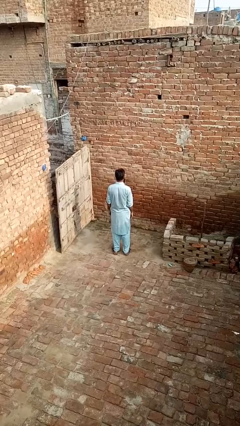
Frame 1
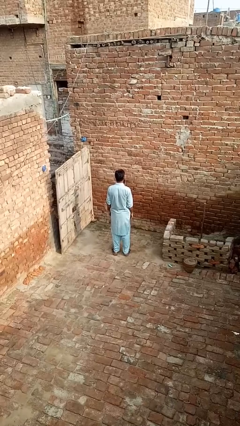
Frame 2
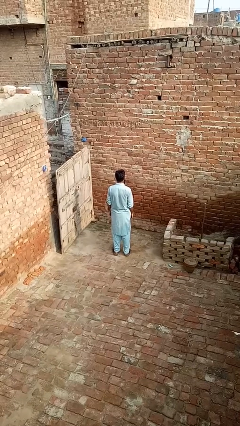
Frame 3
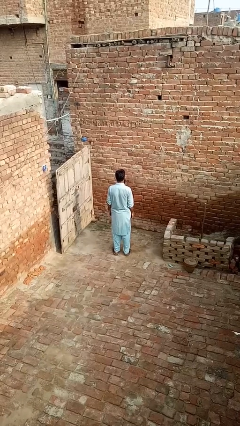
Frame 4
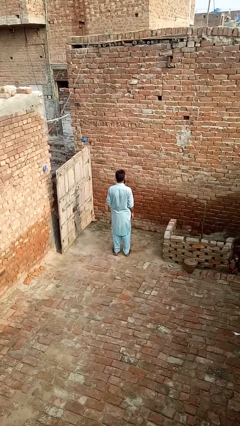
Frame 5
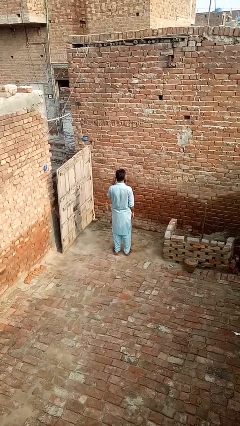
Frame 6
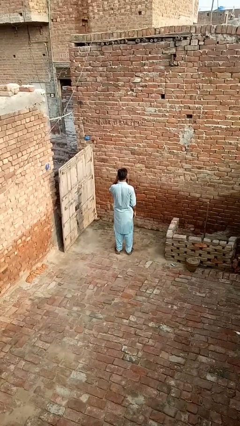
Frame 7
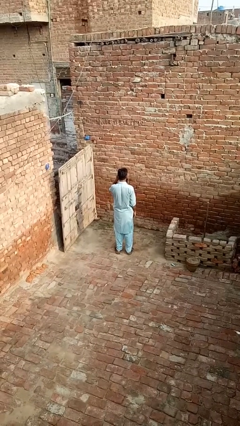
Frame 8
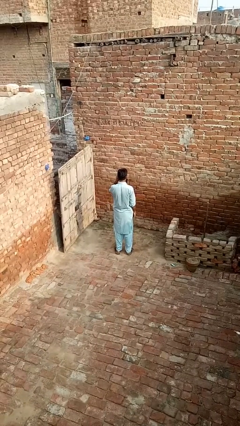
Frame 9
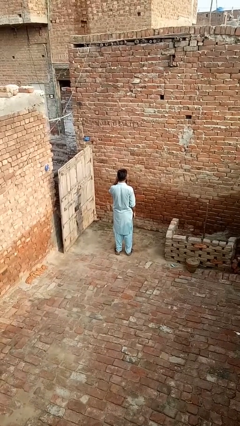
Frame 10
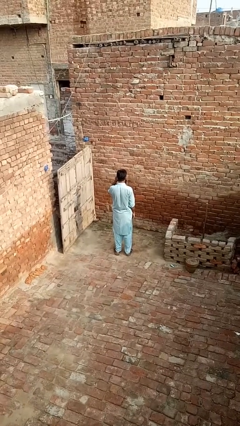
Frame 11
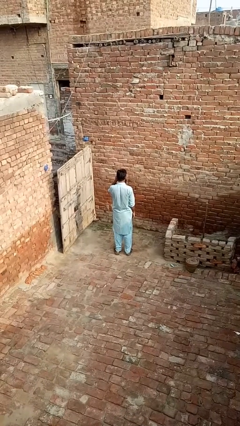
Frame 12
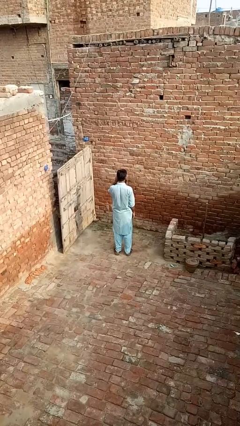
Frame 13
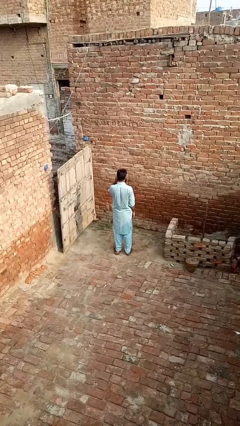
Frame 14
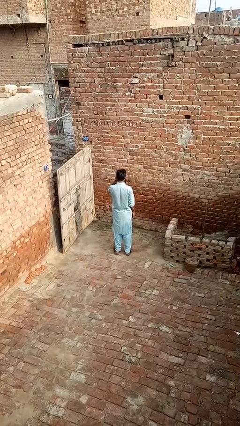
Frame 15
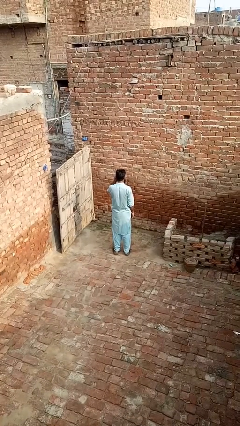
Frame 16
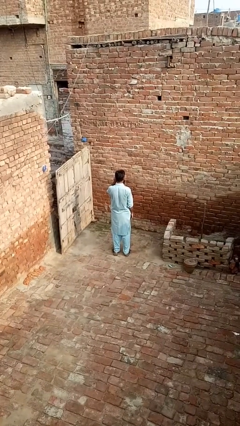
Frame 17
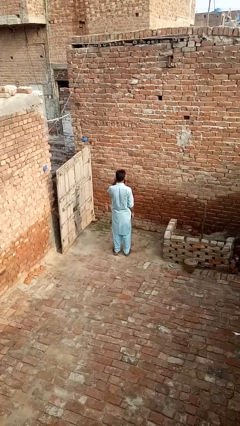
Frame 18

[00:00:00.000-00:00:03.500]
person touches earlobe

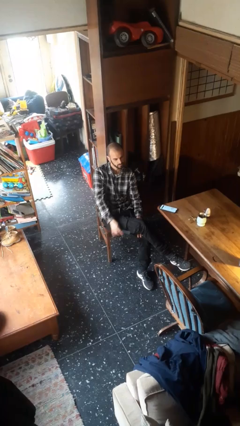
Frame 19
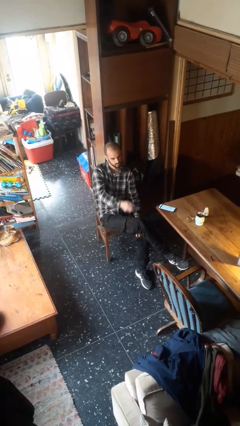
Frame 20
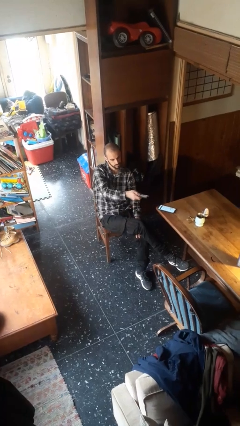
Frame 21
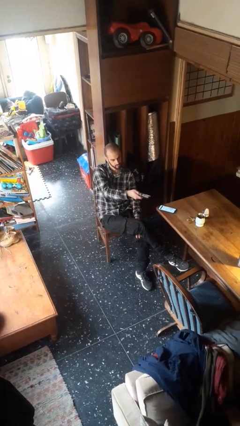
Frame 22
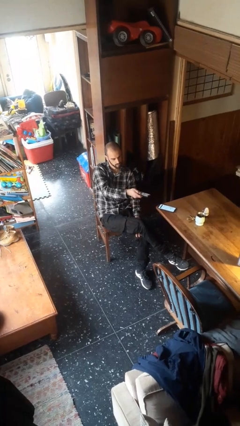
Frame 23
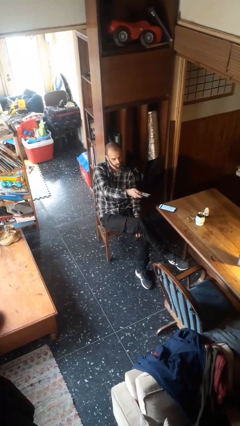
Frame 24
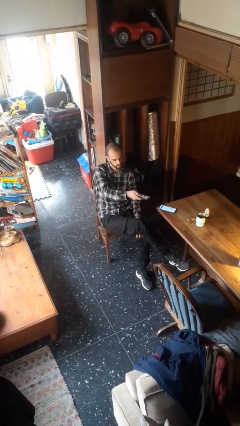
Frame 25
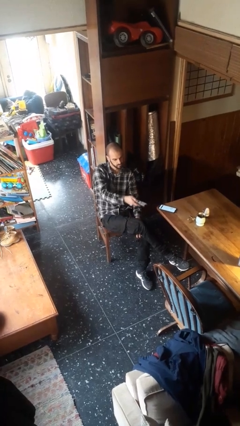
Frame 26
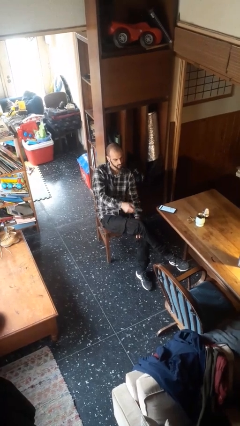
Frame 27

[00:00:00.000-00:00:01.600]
person uses television remote

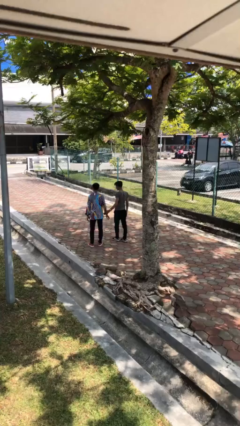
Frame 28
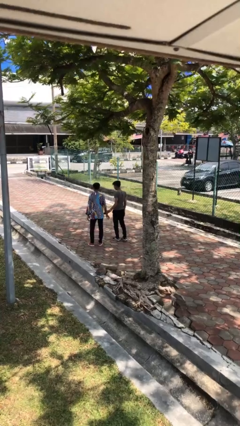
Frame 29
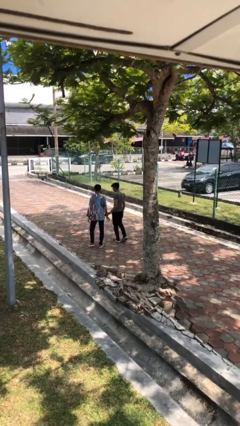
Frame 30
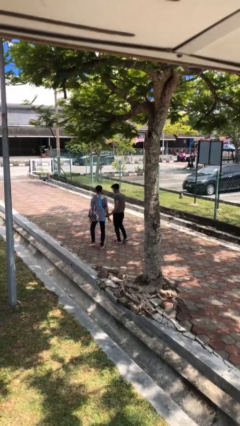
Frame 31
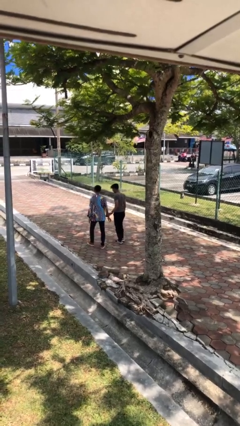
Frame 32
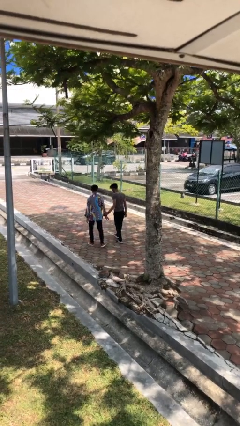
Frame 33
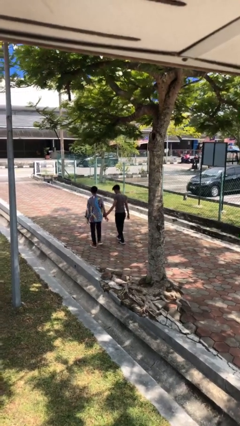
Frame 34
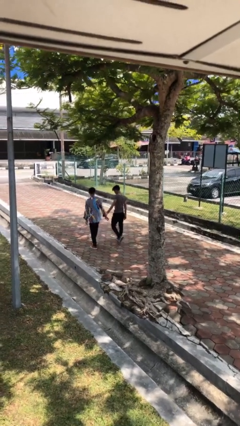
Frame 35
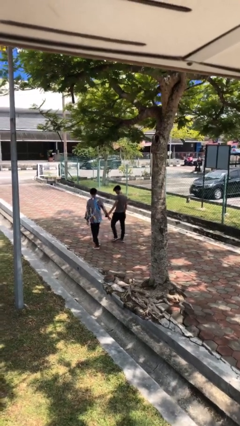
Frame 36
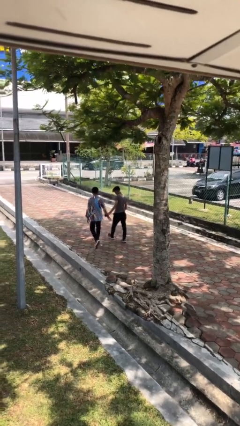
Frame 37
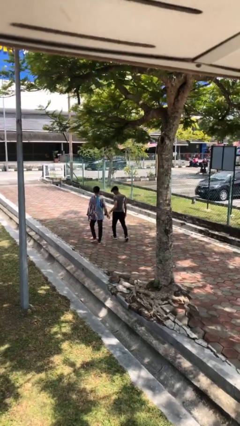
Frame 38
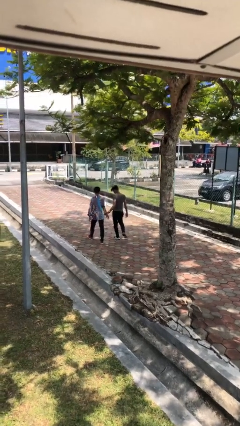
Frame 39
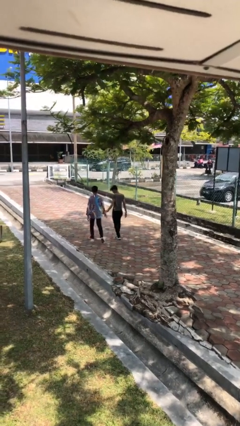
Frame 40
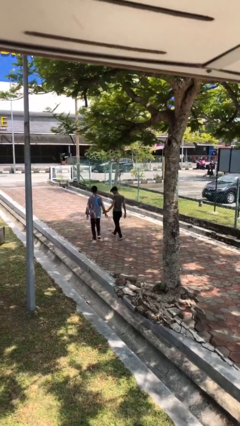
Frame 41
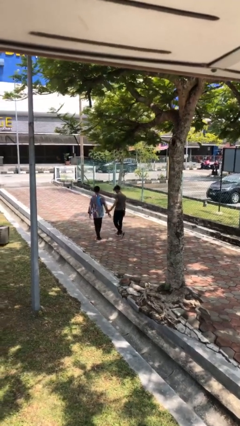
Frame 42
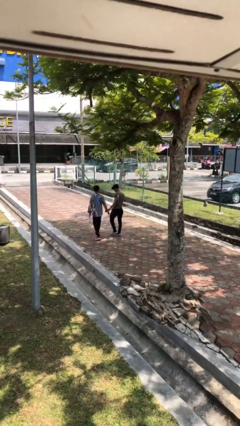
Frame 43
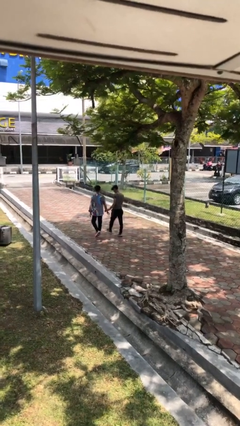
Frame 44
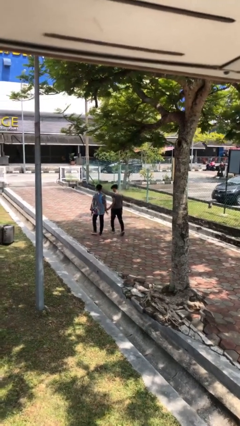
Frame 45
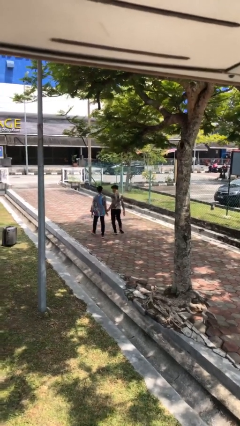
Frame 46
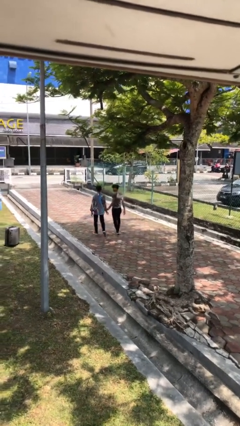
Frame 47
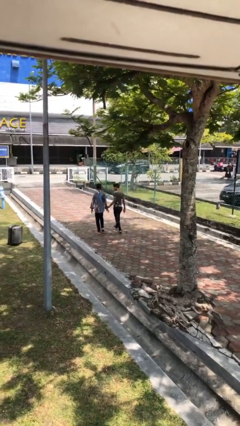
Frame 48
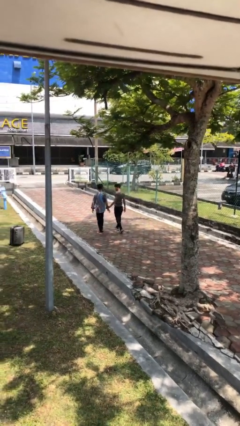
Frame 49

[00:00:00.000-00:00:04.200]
person holds hand

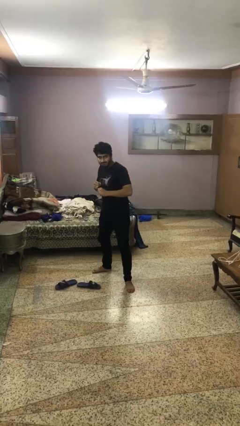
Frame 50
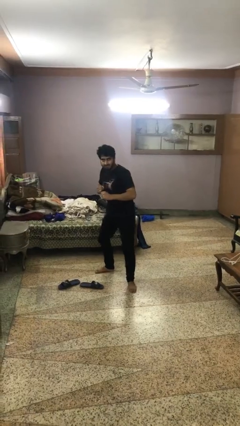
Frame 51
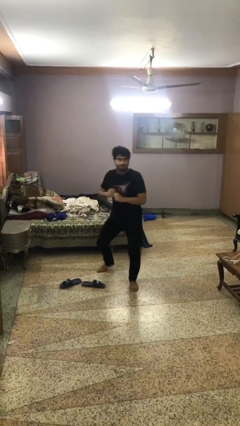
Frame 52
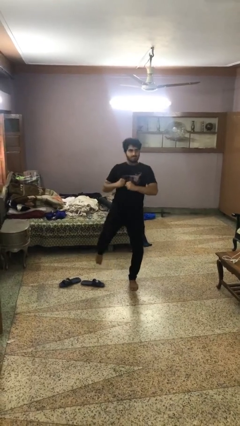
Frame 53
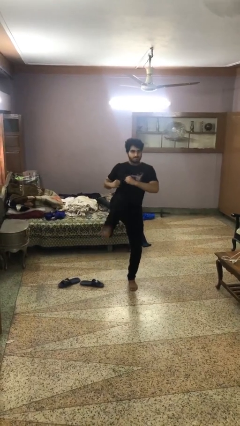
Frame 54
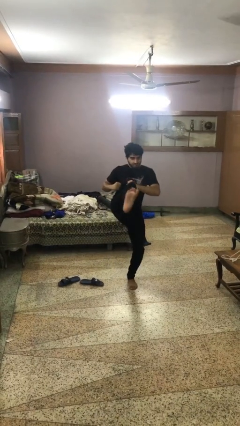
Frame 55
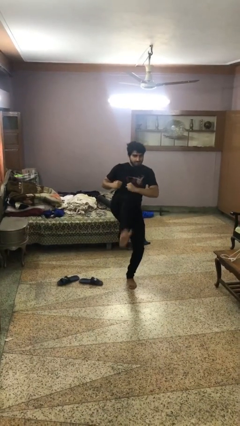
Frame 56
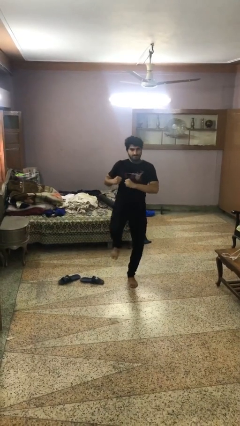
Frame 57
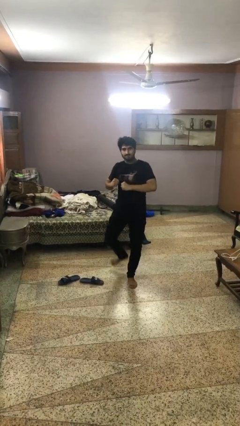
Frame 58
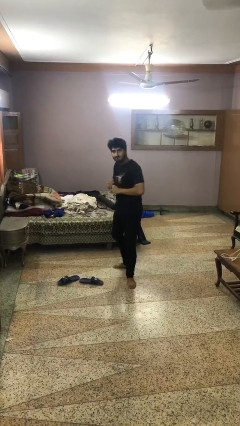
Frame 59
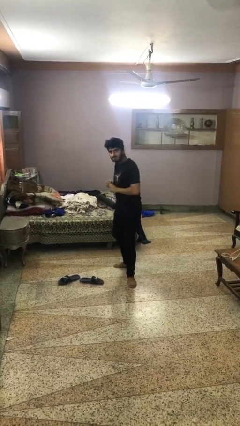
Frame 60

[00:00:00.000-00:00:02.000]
person karate kicks

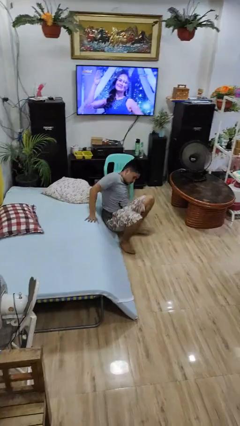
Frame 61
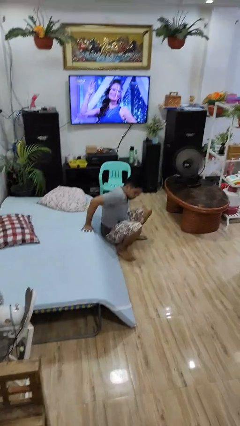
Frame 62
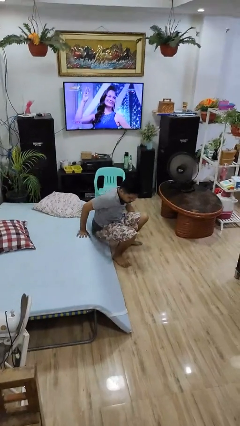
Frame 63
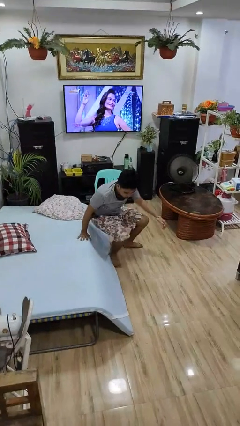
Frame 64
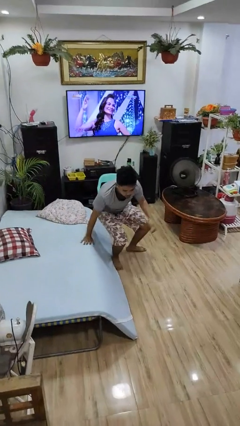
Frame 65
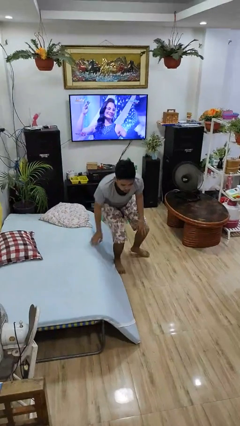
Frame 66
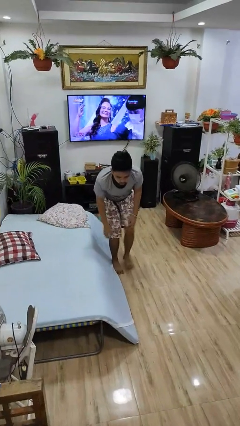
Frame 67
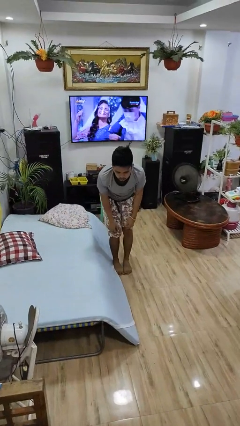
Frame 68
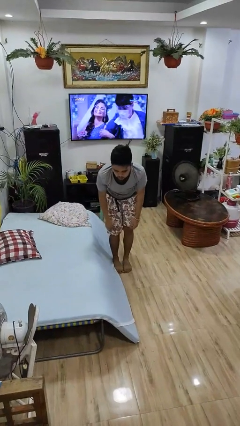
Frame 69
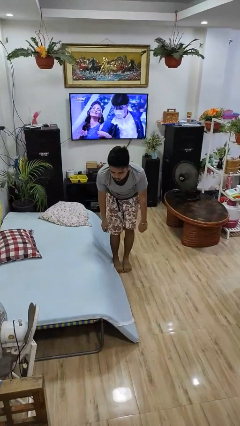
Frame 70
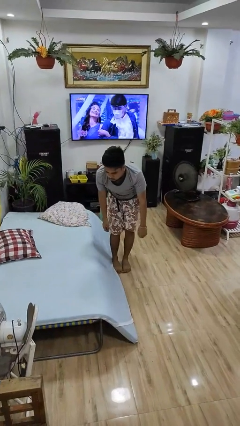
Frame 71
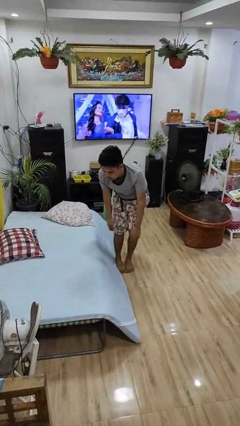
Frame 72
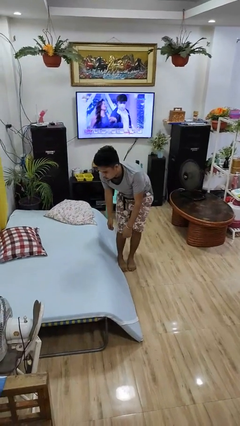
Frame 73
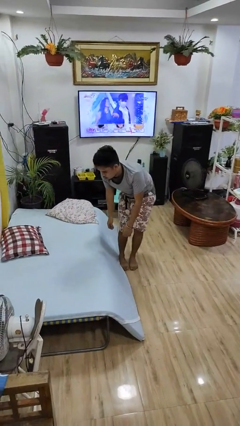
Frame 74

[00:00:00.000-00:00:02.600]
person stands up from floor

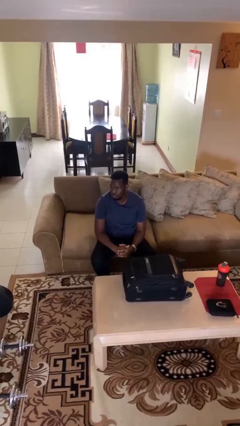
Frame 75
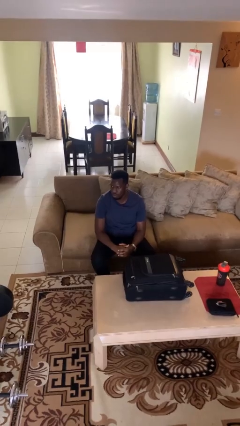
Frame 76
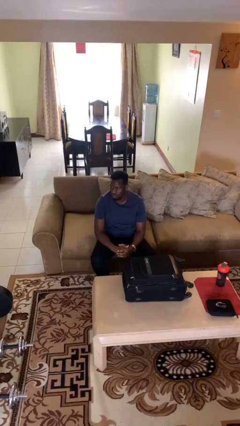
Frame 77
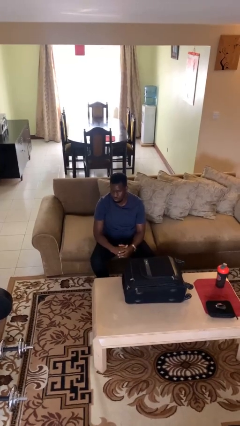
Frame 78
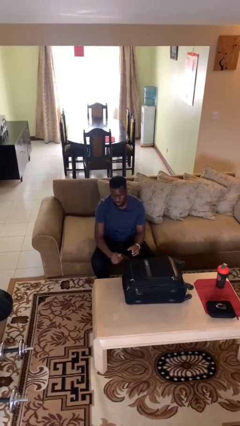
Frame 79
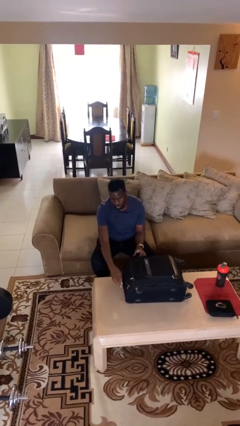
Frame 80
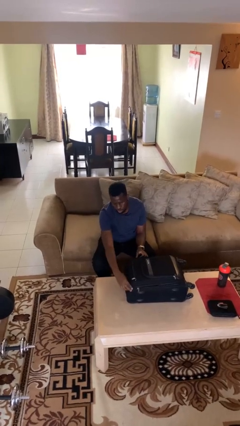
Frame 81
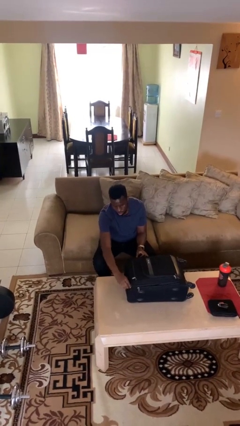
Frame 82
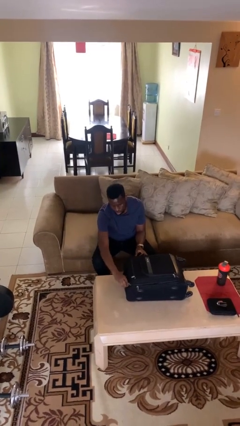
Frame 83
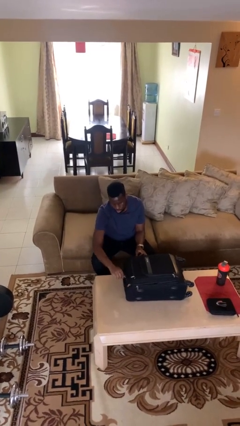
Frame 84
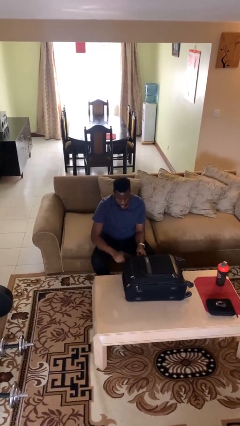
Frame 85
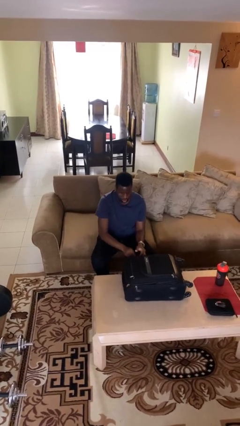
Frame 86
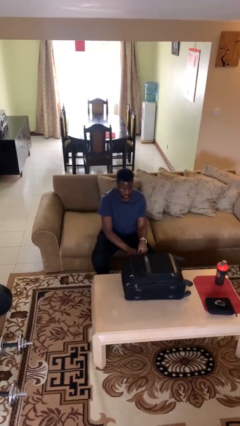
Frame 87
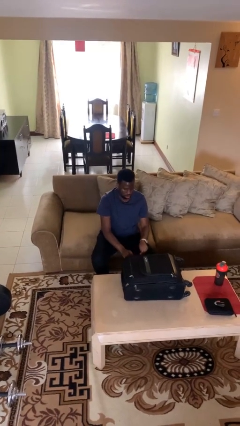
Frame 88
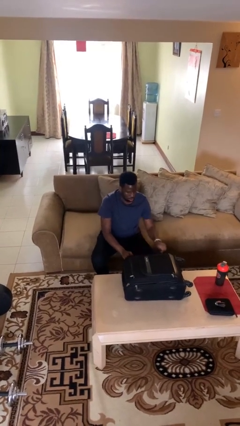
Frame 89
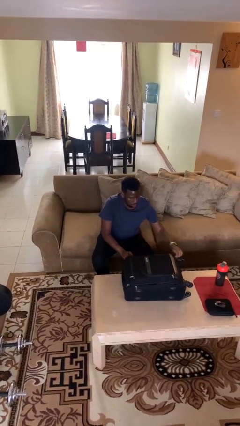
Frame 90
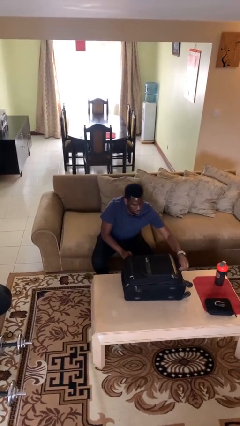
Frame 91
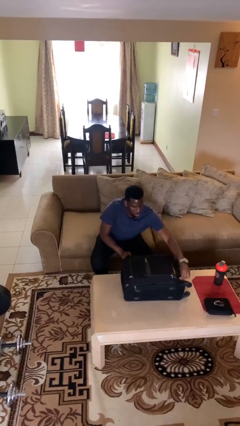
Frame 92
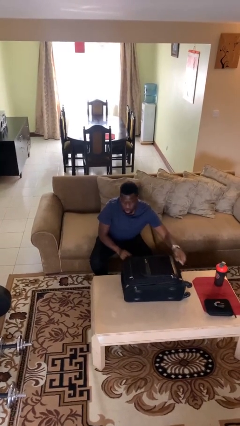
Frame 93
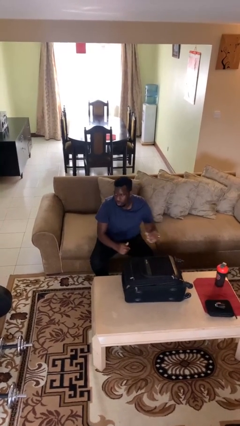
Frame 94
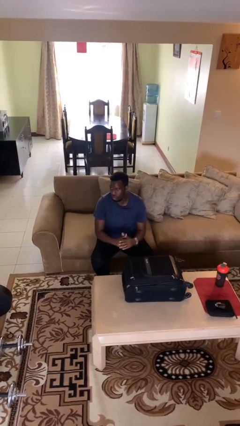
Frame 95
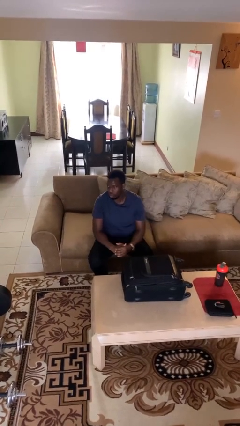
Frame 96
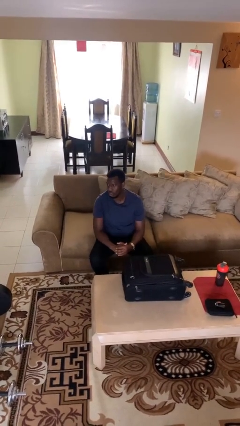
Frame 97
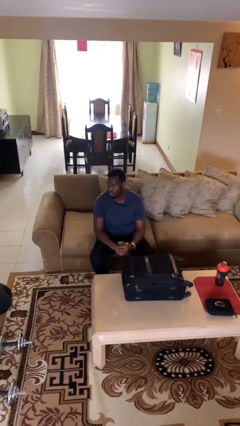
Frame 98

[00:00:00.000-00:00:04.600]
person opens suitcase
